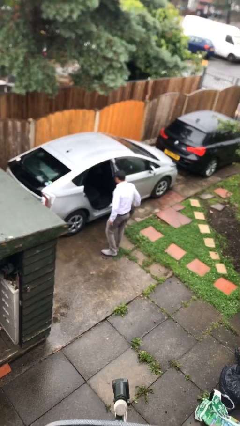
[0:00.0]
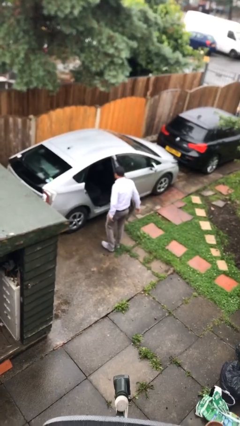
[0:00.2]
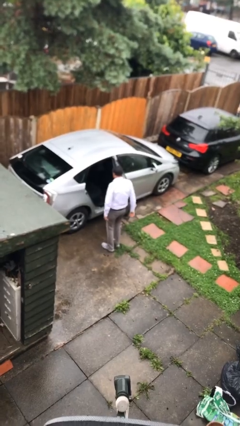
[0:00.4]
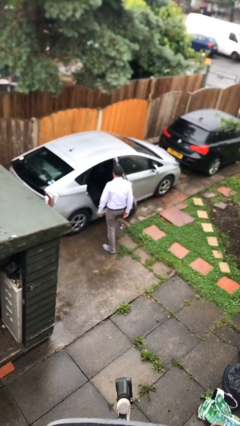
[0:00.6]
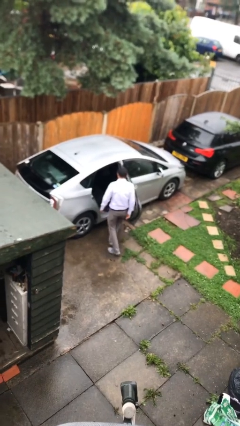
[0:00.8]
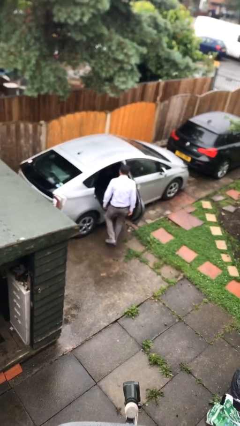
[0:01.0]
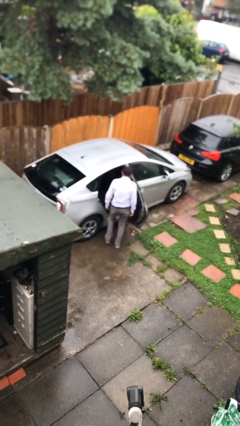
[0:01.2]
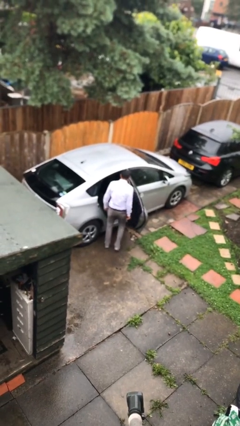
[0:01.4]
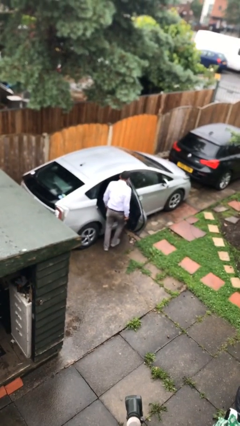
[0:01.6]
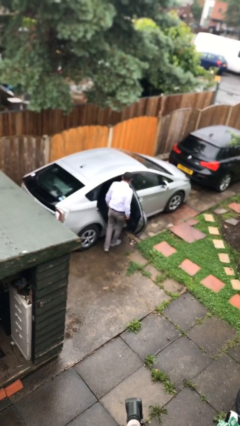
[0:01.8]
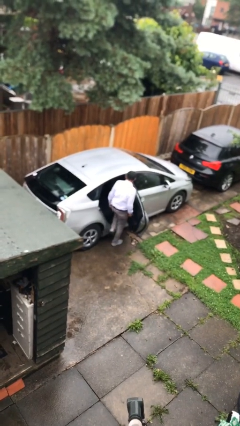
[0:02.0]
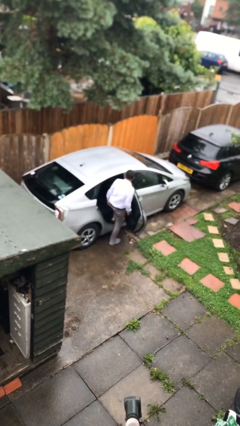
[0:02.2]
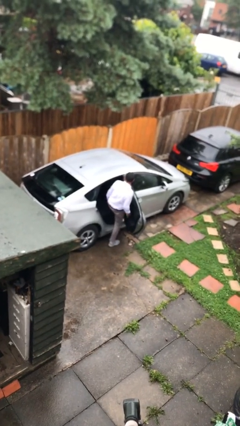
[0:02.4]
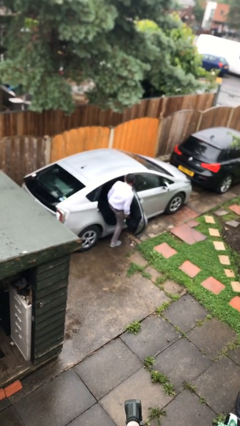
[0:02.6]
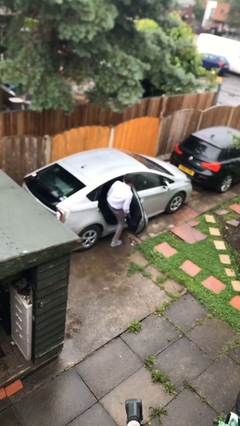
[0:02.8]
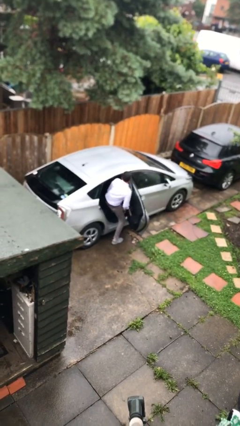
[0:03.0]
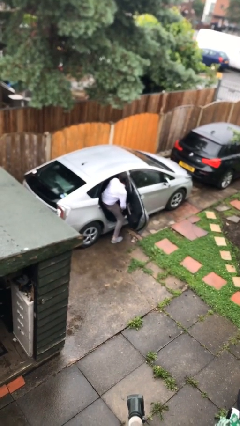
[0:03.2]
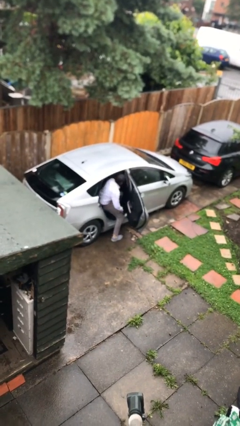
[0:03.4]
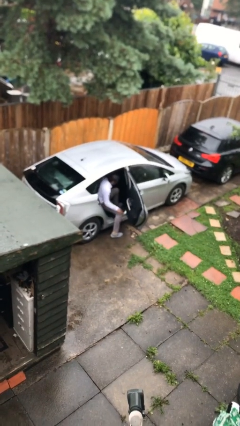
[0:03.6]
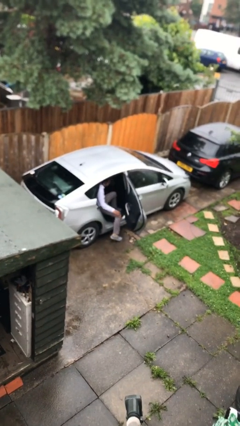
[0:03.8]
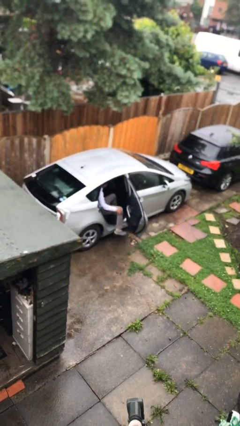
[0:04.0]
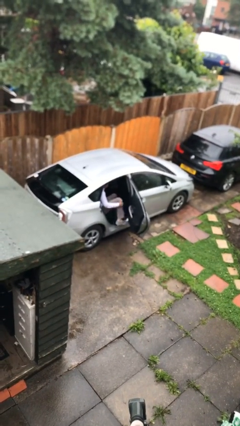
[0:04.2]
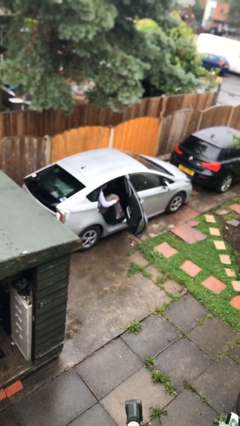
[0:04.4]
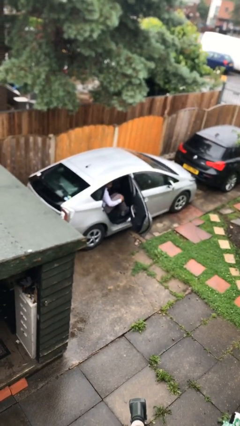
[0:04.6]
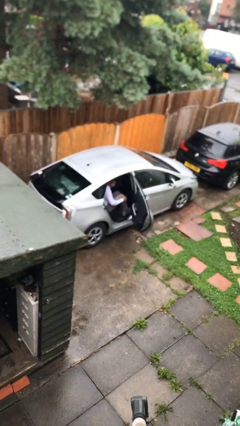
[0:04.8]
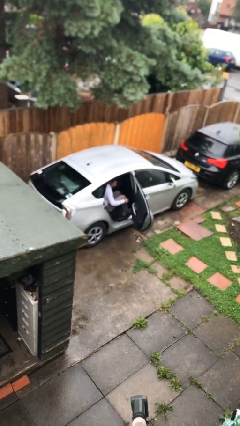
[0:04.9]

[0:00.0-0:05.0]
person enters car

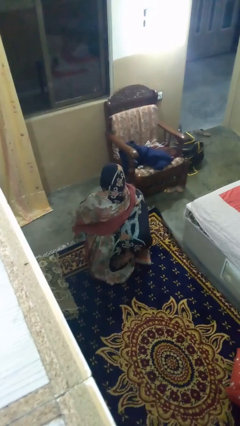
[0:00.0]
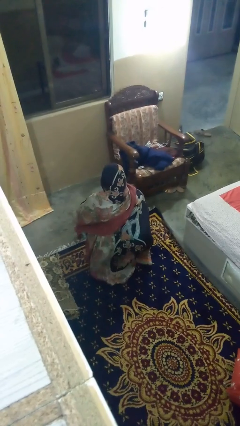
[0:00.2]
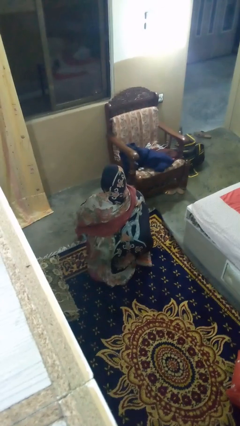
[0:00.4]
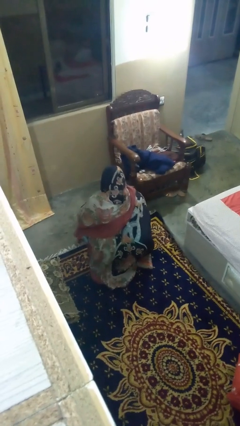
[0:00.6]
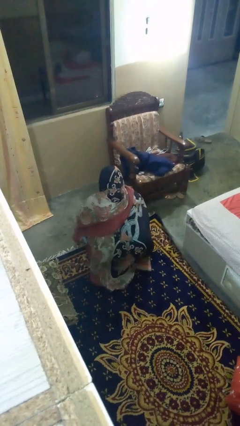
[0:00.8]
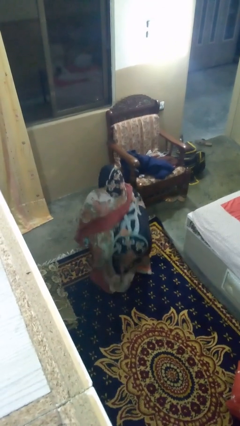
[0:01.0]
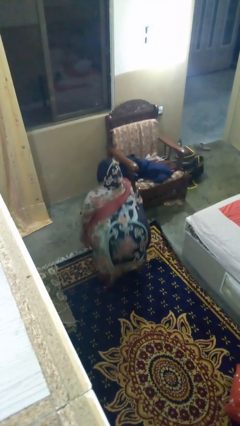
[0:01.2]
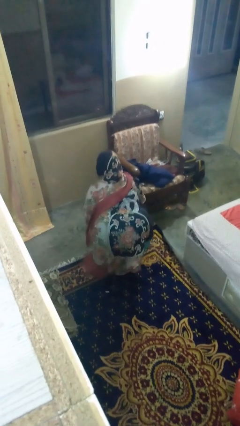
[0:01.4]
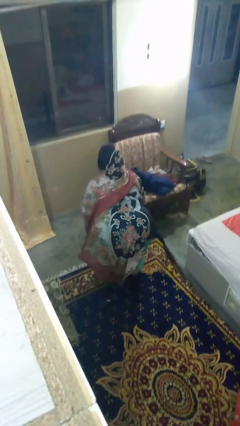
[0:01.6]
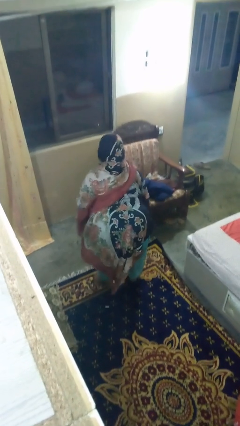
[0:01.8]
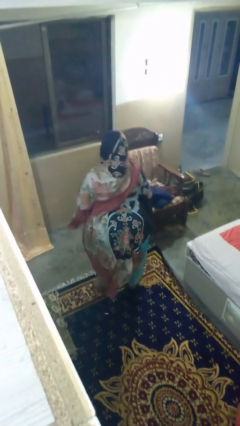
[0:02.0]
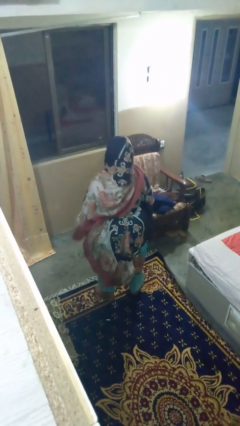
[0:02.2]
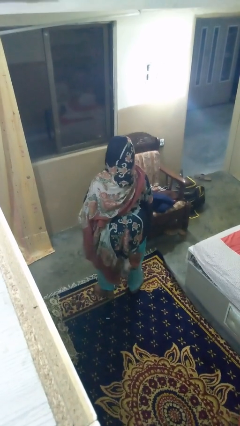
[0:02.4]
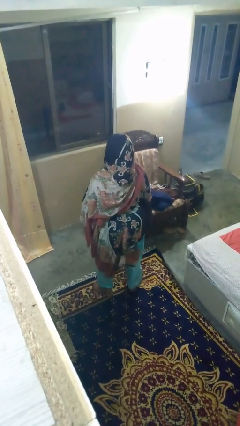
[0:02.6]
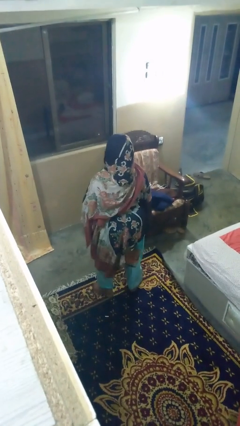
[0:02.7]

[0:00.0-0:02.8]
person stands up

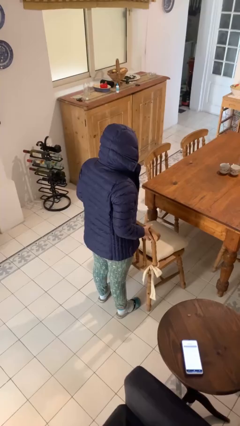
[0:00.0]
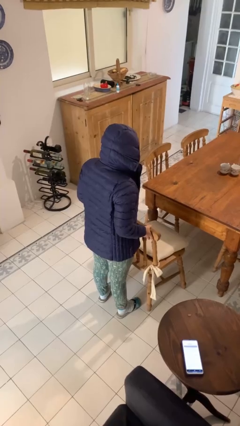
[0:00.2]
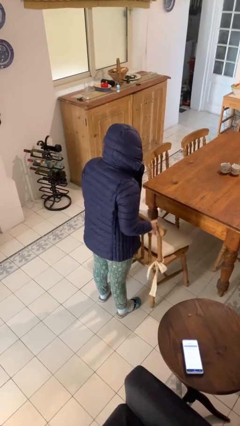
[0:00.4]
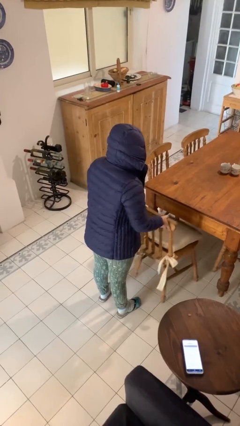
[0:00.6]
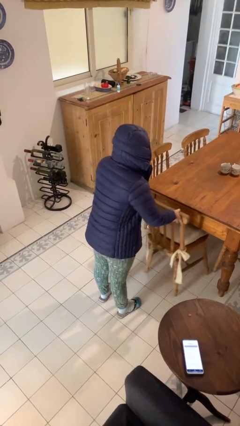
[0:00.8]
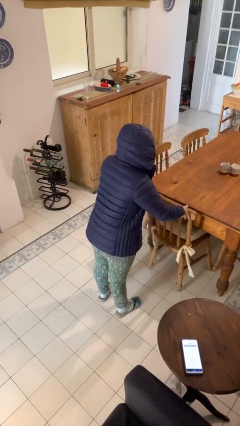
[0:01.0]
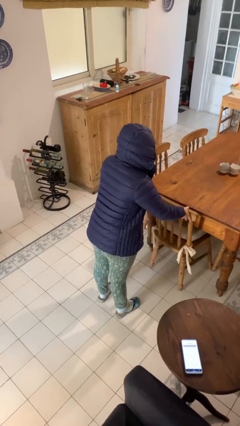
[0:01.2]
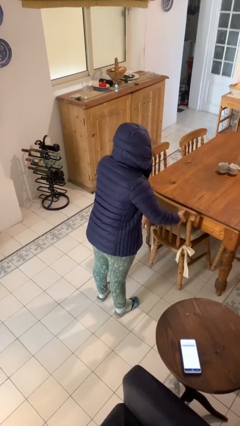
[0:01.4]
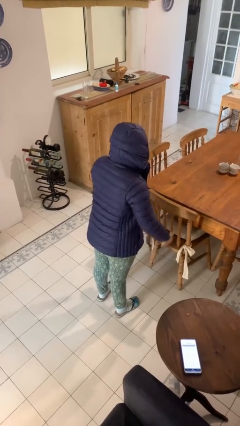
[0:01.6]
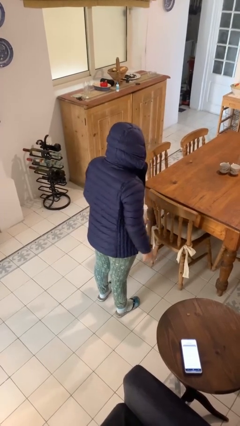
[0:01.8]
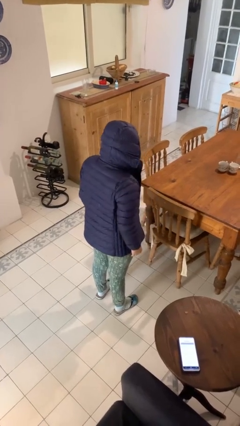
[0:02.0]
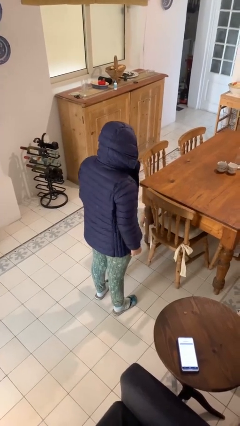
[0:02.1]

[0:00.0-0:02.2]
person pushes in chair

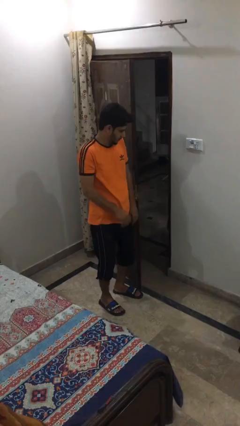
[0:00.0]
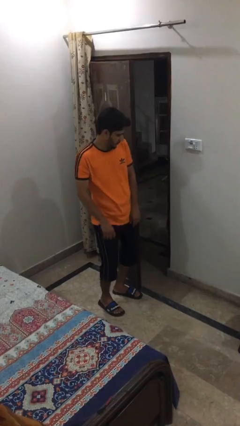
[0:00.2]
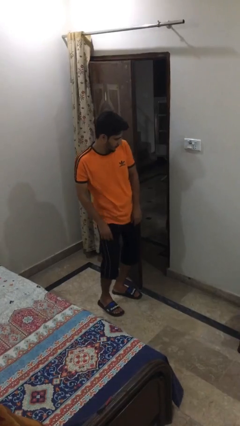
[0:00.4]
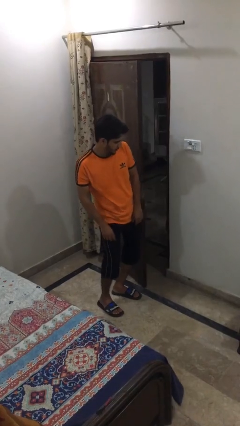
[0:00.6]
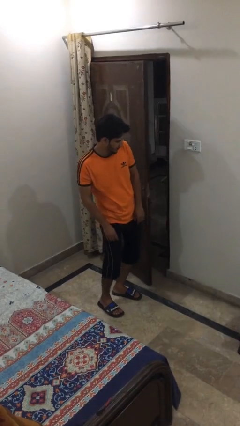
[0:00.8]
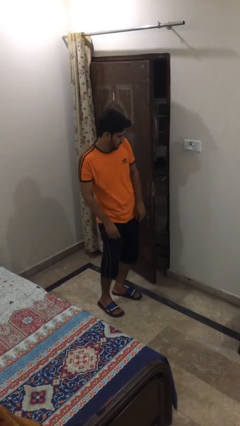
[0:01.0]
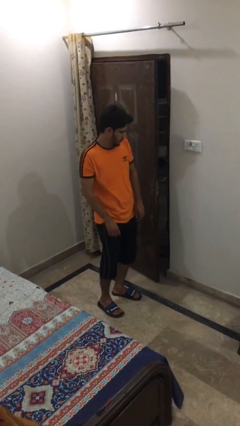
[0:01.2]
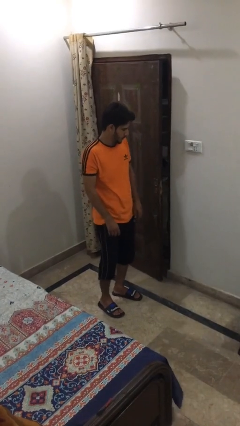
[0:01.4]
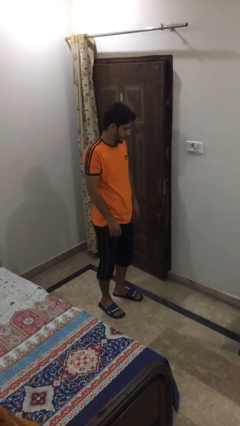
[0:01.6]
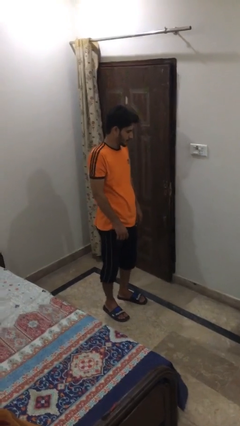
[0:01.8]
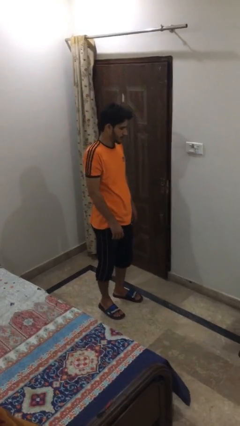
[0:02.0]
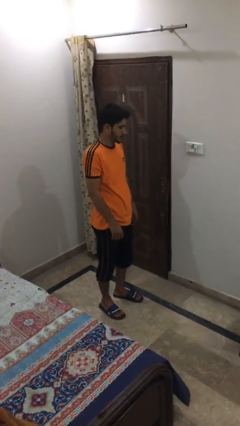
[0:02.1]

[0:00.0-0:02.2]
person closes door with hip

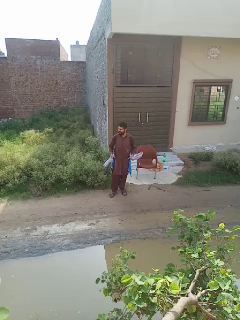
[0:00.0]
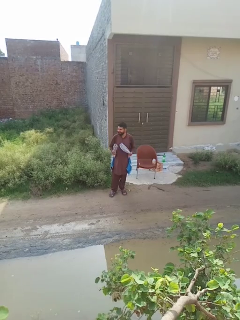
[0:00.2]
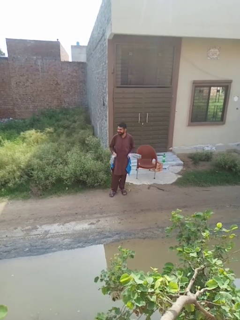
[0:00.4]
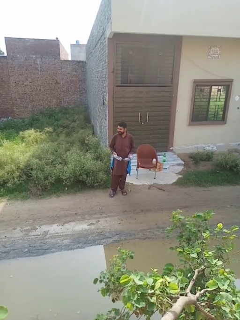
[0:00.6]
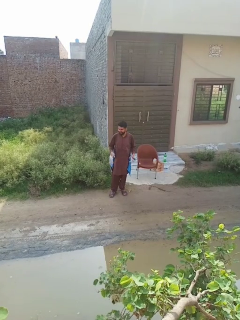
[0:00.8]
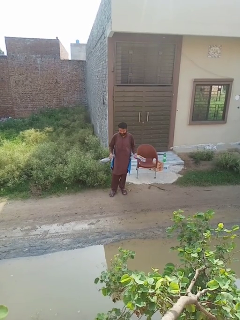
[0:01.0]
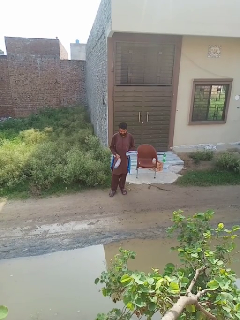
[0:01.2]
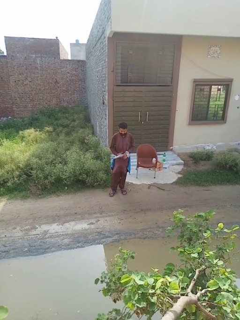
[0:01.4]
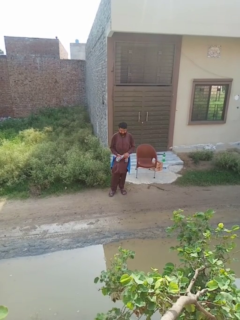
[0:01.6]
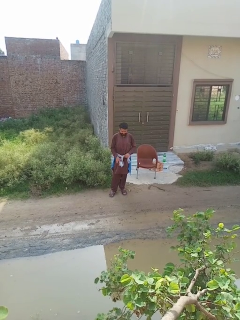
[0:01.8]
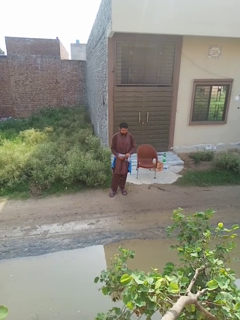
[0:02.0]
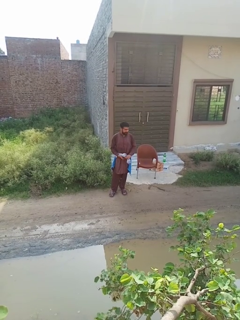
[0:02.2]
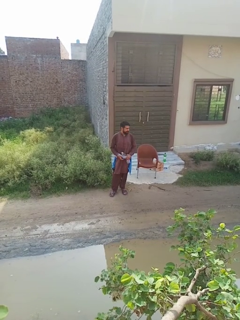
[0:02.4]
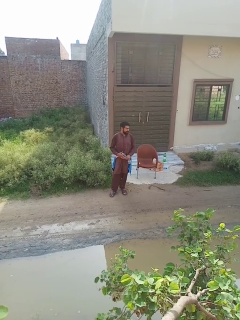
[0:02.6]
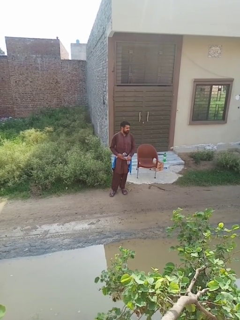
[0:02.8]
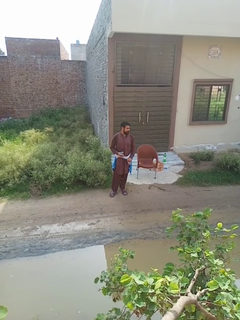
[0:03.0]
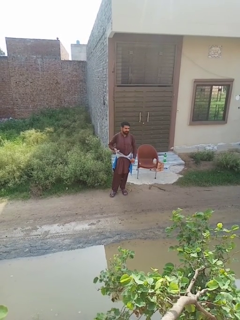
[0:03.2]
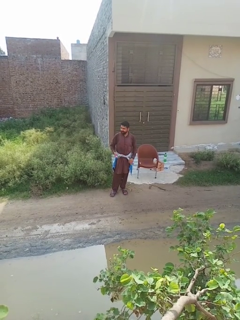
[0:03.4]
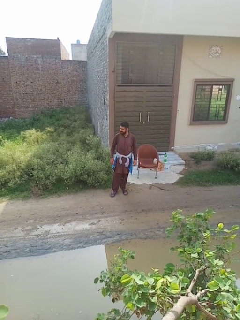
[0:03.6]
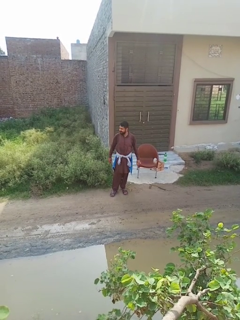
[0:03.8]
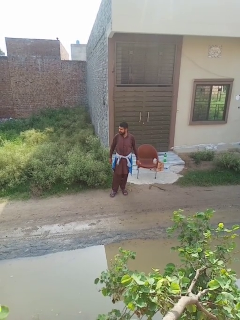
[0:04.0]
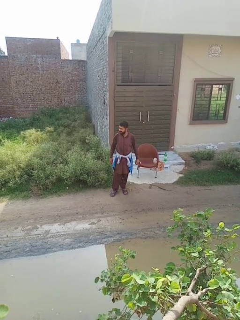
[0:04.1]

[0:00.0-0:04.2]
person ties jacket around waist

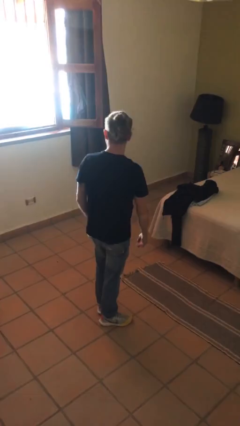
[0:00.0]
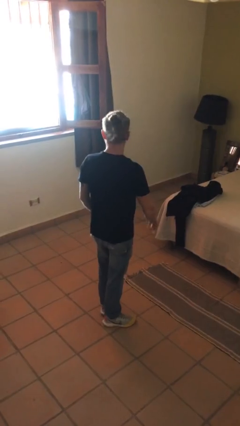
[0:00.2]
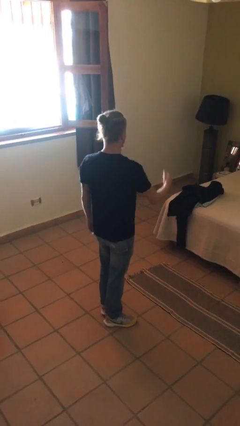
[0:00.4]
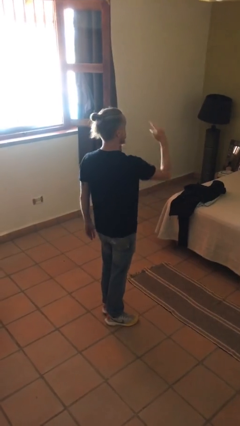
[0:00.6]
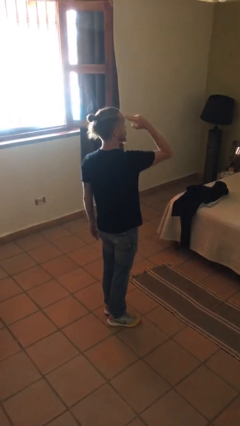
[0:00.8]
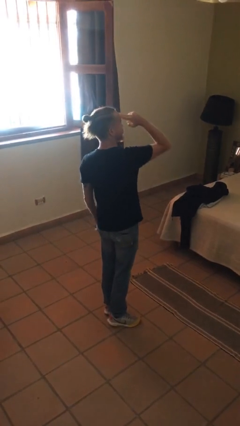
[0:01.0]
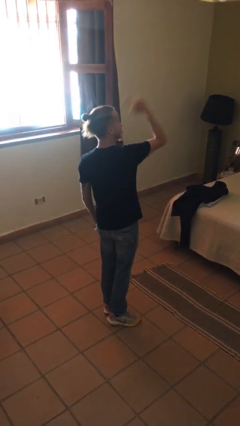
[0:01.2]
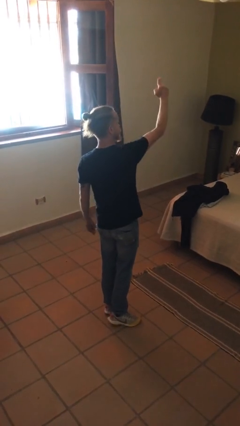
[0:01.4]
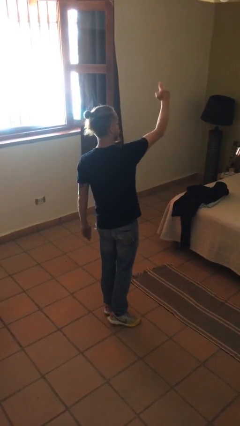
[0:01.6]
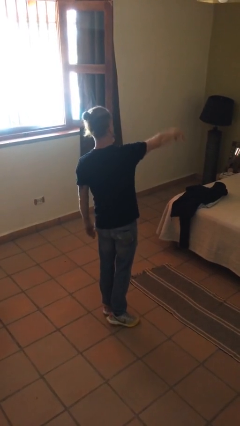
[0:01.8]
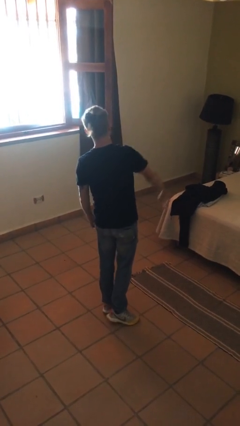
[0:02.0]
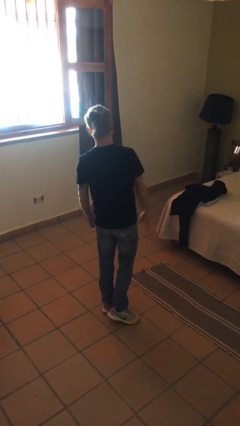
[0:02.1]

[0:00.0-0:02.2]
person salutes
